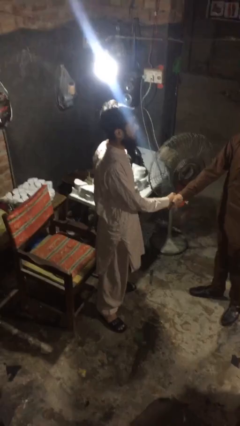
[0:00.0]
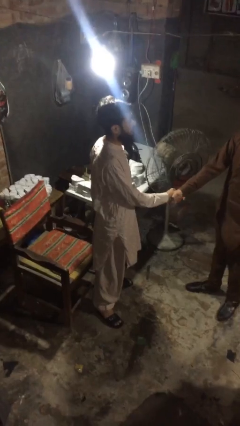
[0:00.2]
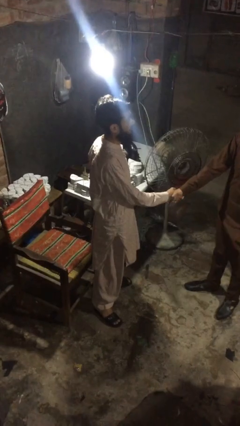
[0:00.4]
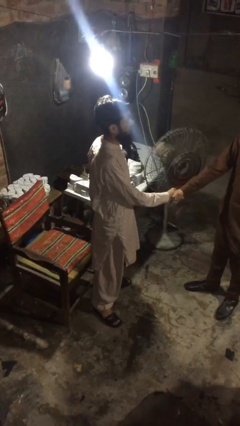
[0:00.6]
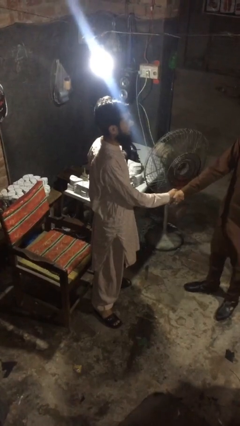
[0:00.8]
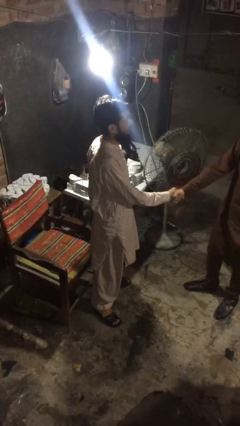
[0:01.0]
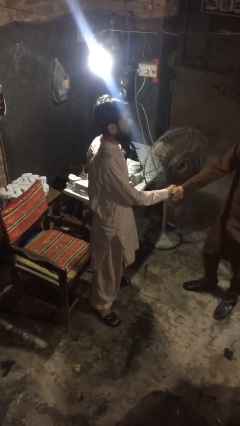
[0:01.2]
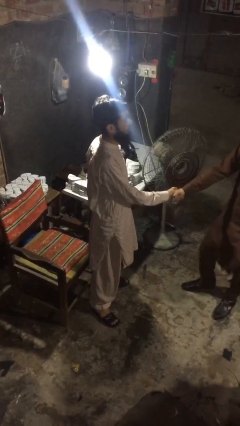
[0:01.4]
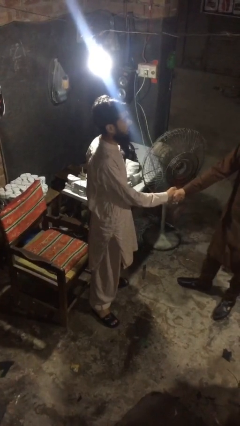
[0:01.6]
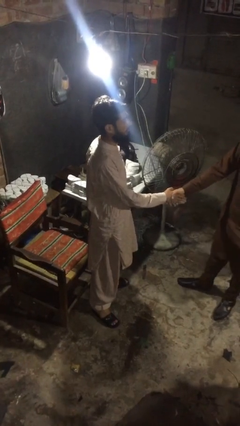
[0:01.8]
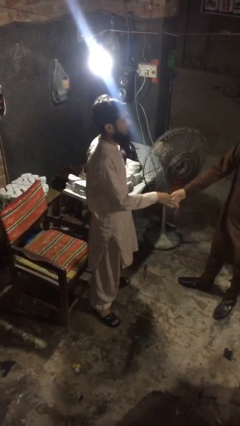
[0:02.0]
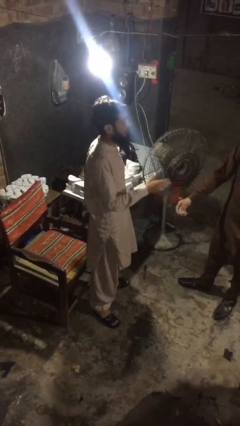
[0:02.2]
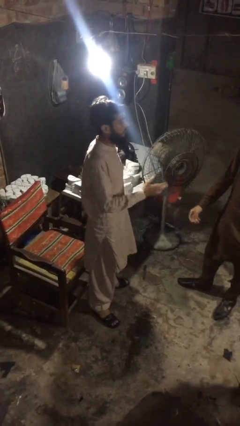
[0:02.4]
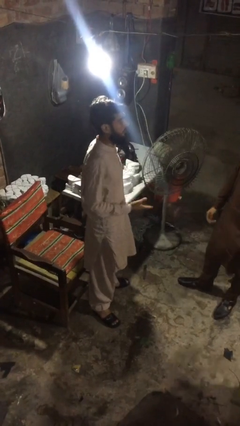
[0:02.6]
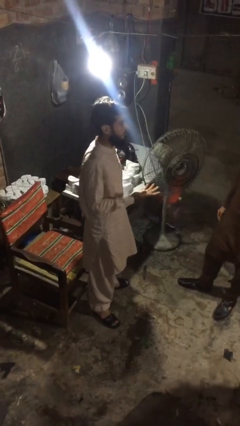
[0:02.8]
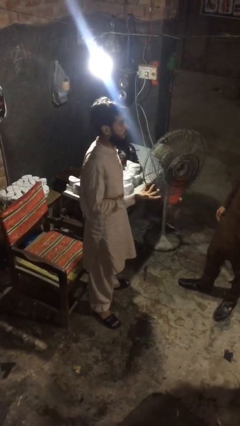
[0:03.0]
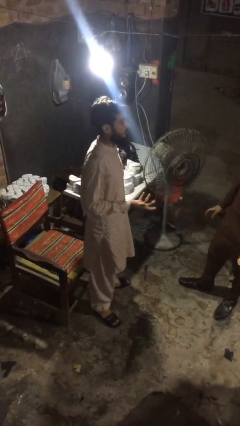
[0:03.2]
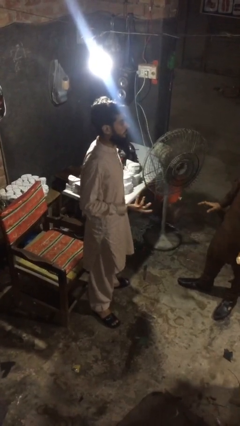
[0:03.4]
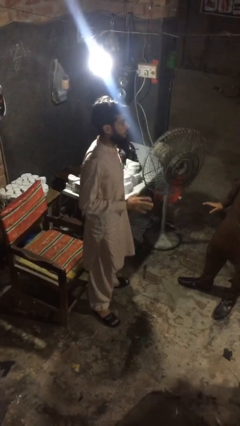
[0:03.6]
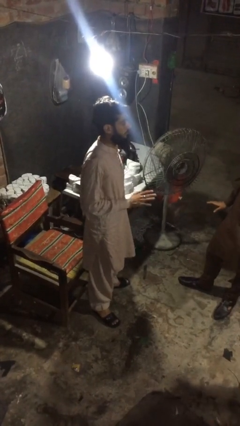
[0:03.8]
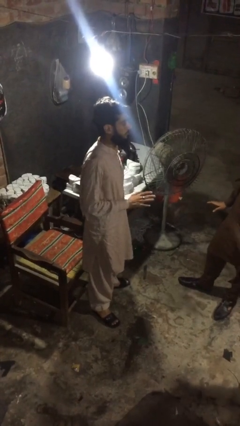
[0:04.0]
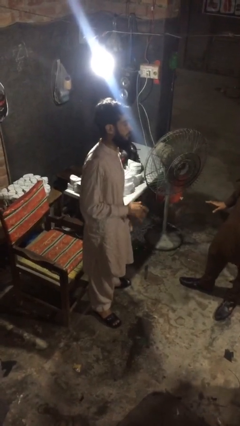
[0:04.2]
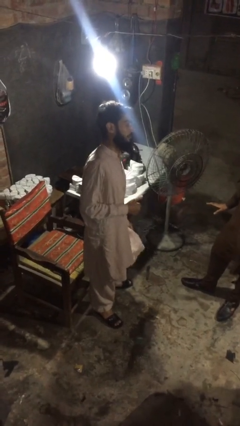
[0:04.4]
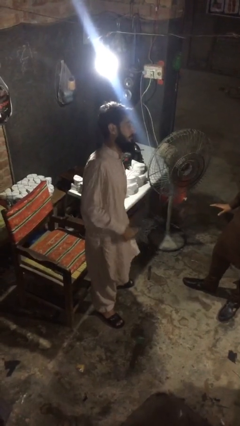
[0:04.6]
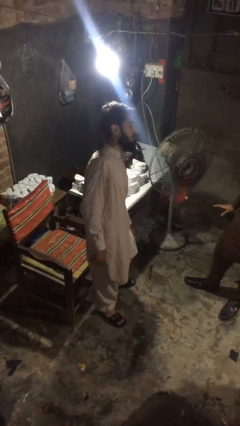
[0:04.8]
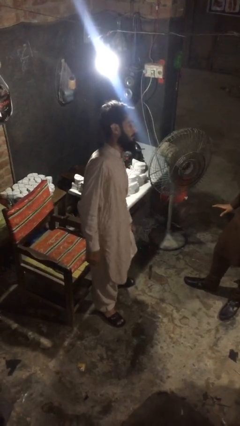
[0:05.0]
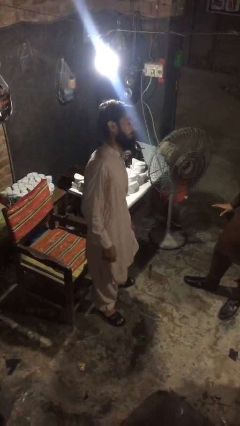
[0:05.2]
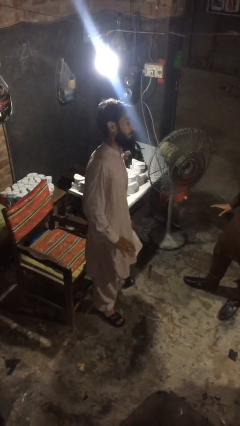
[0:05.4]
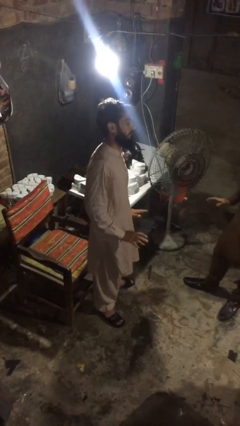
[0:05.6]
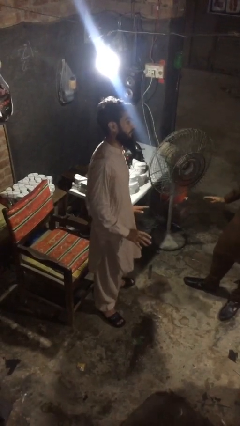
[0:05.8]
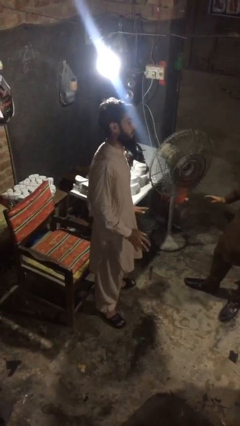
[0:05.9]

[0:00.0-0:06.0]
person talks to person

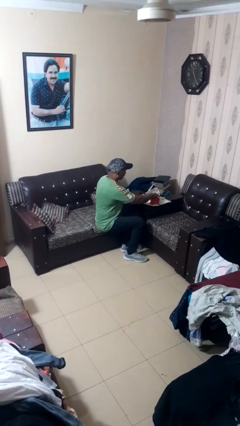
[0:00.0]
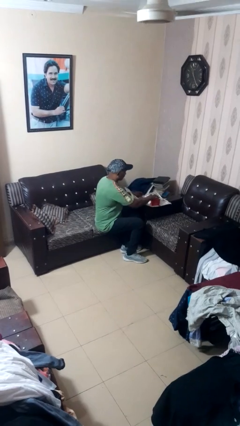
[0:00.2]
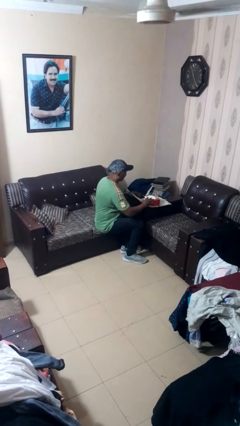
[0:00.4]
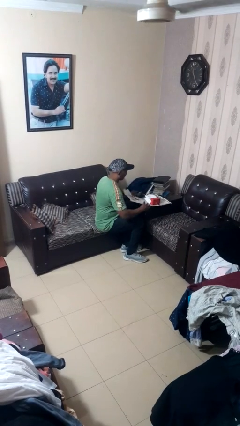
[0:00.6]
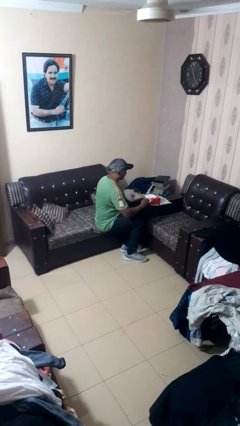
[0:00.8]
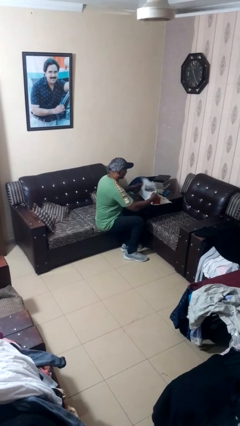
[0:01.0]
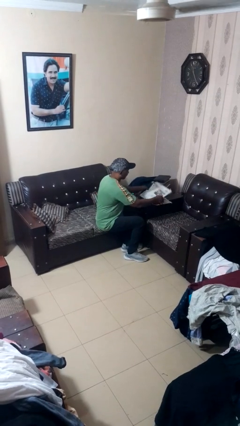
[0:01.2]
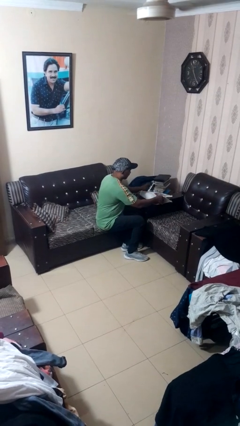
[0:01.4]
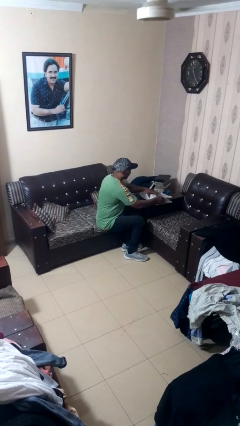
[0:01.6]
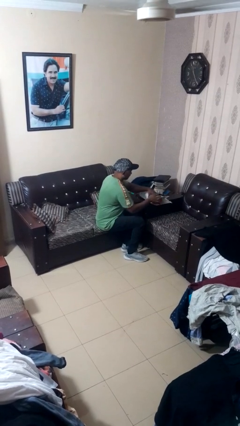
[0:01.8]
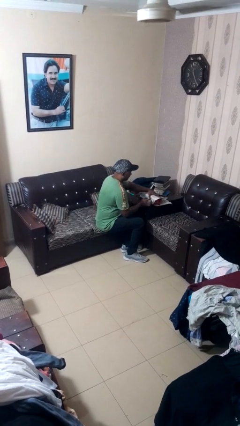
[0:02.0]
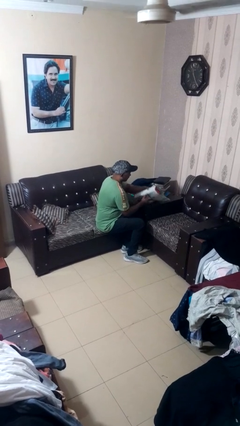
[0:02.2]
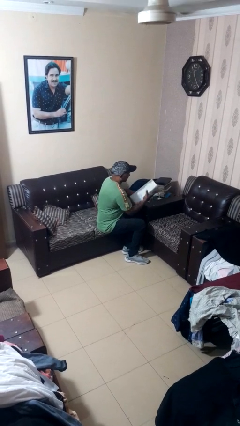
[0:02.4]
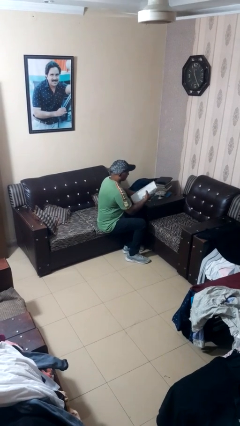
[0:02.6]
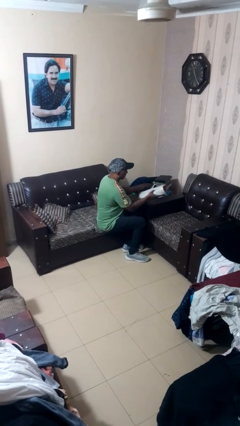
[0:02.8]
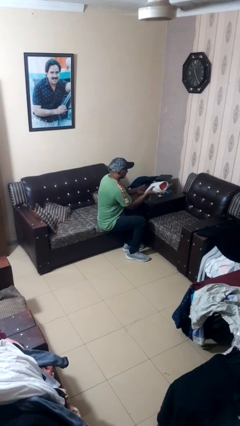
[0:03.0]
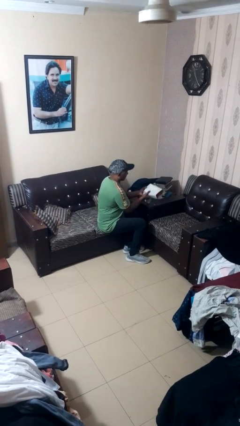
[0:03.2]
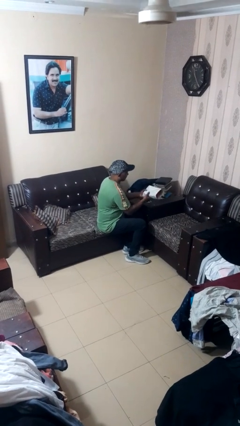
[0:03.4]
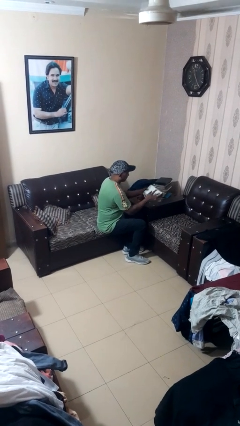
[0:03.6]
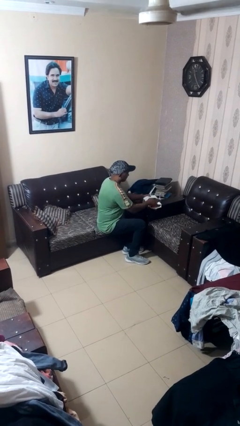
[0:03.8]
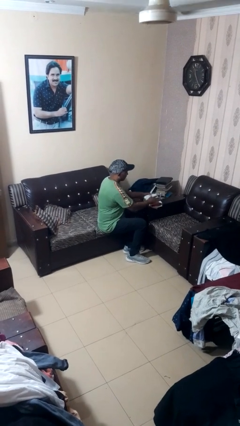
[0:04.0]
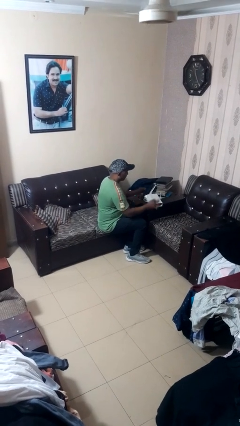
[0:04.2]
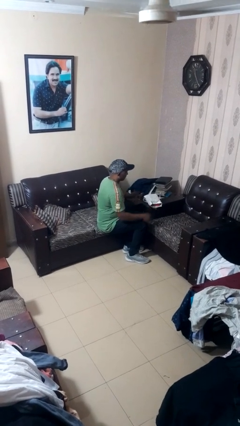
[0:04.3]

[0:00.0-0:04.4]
person wraps box

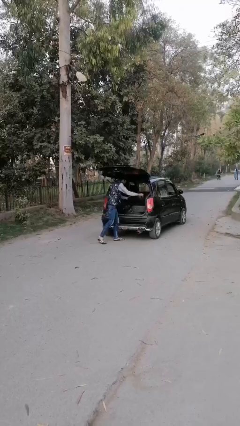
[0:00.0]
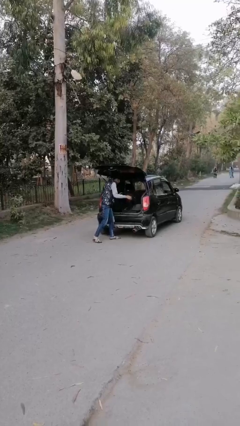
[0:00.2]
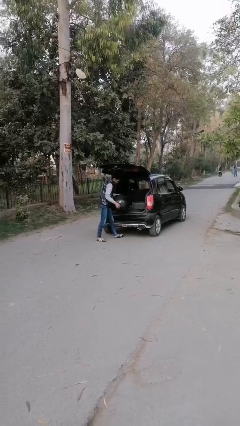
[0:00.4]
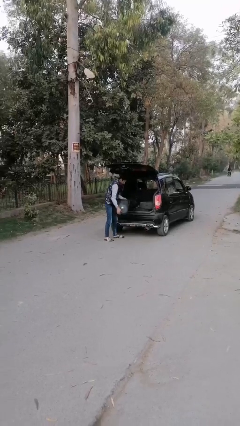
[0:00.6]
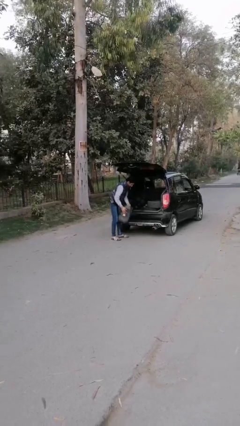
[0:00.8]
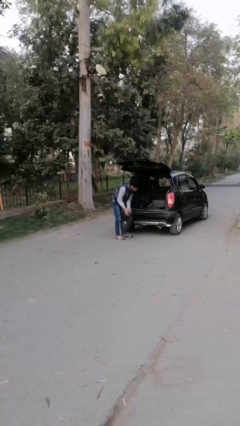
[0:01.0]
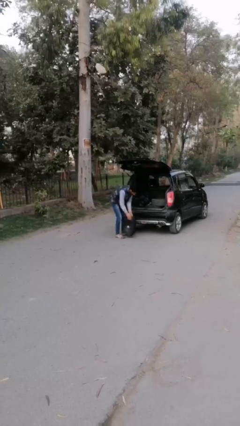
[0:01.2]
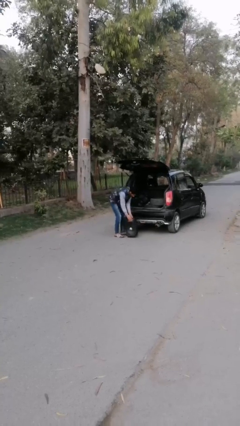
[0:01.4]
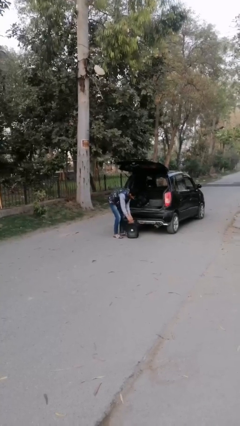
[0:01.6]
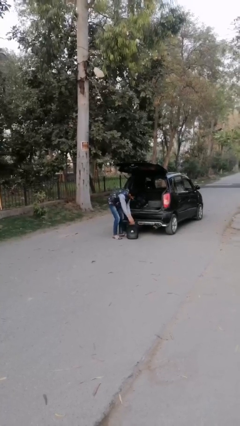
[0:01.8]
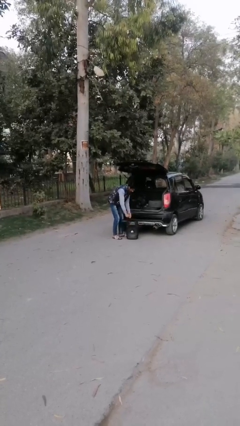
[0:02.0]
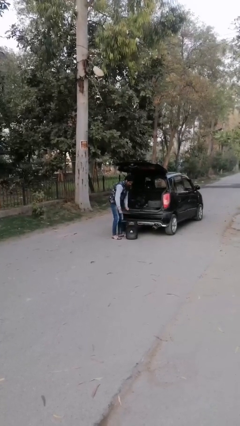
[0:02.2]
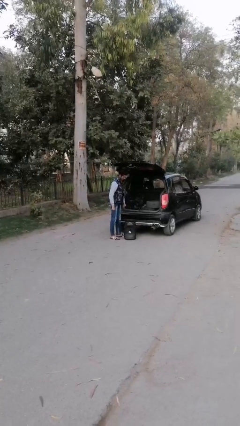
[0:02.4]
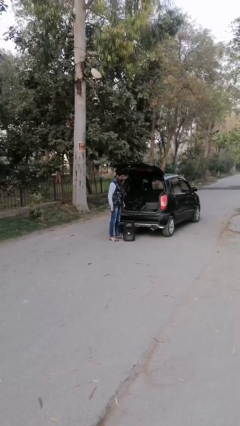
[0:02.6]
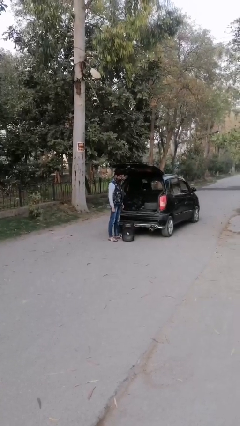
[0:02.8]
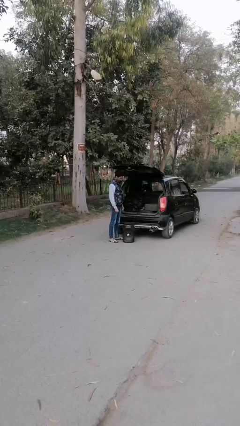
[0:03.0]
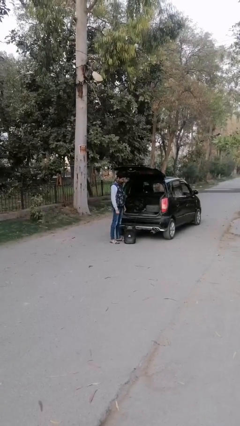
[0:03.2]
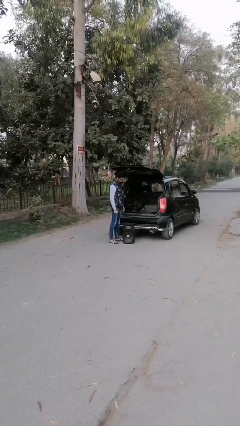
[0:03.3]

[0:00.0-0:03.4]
person unloads car

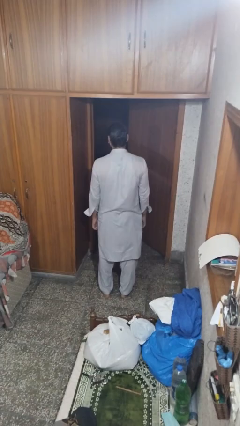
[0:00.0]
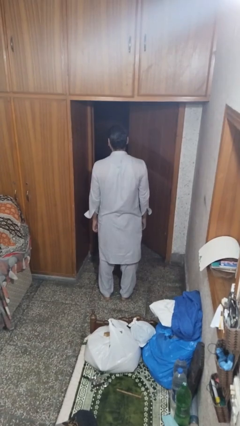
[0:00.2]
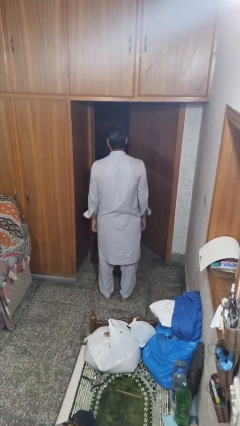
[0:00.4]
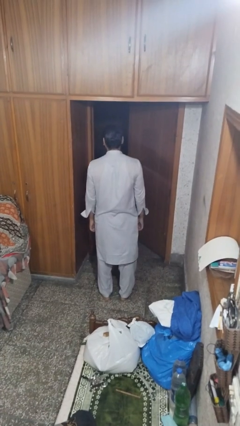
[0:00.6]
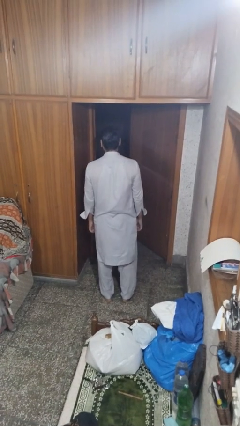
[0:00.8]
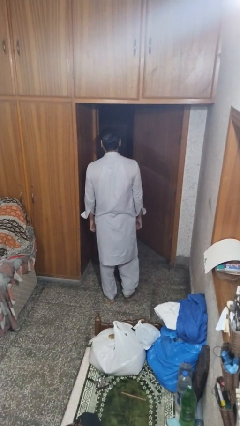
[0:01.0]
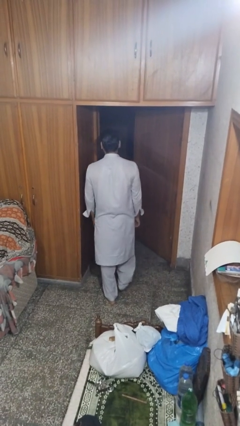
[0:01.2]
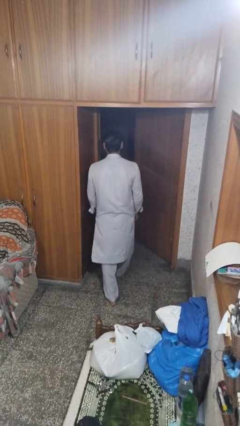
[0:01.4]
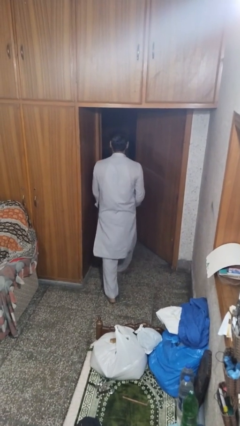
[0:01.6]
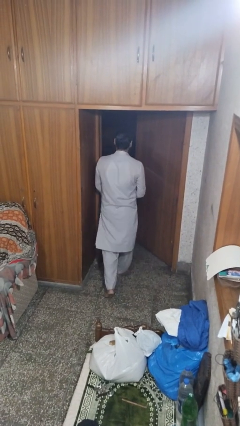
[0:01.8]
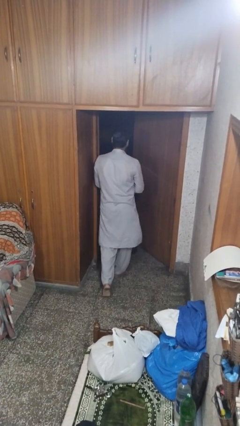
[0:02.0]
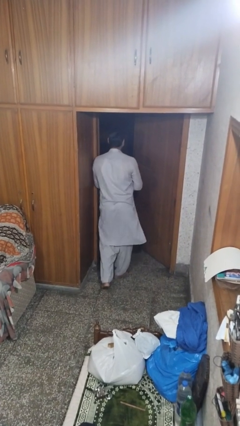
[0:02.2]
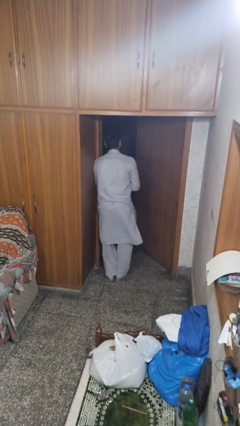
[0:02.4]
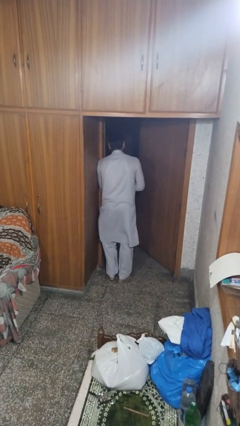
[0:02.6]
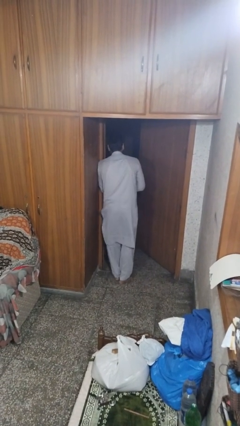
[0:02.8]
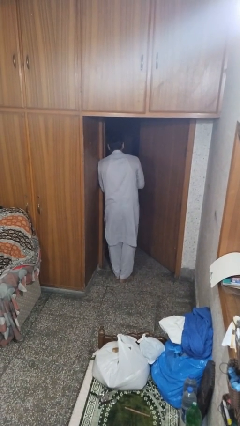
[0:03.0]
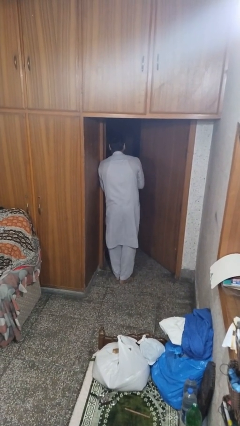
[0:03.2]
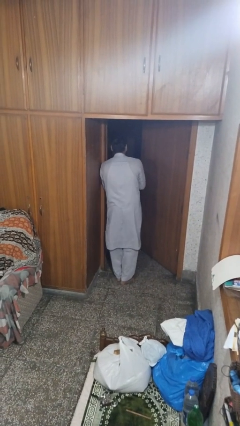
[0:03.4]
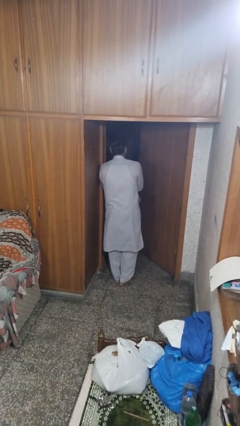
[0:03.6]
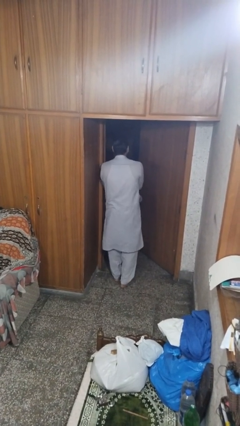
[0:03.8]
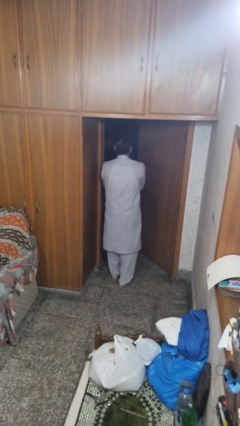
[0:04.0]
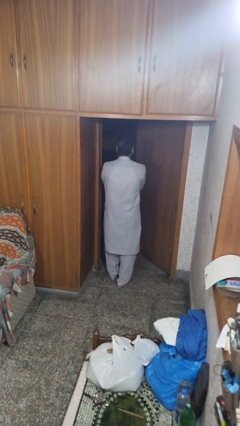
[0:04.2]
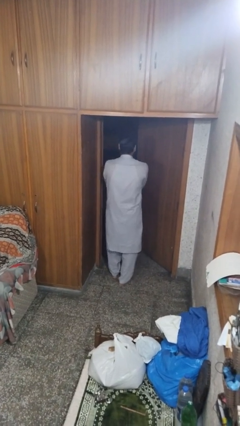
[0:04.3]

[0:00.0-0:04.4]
person bumps into wall
